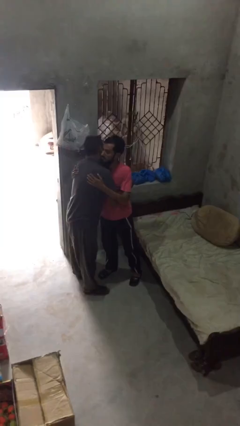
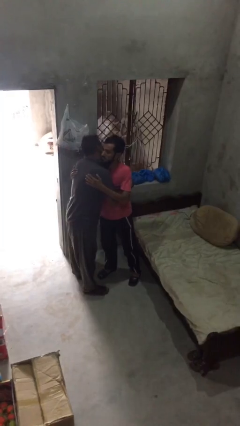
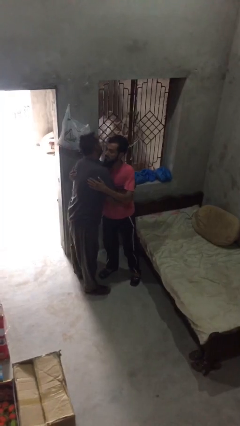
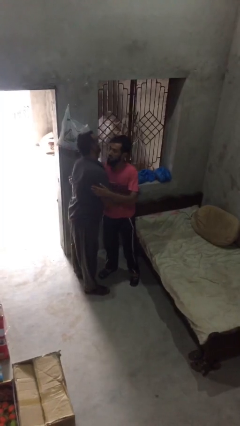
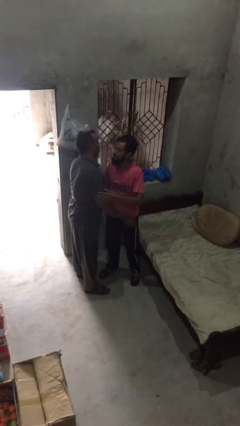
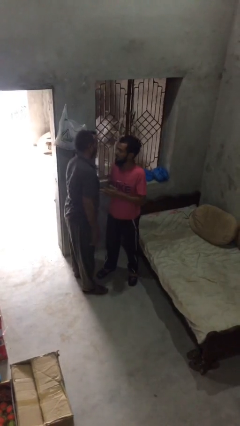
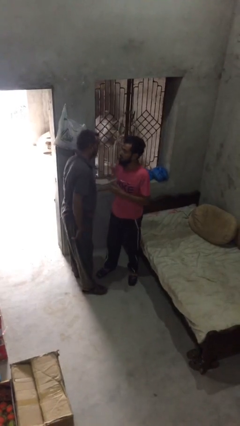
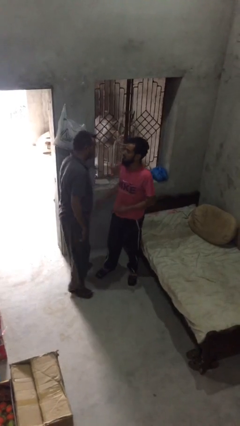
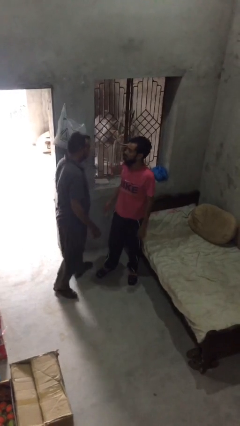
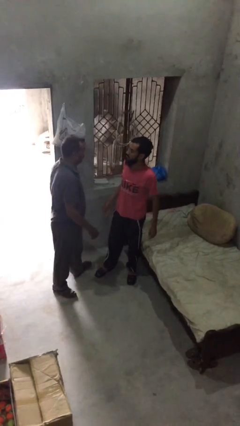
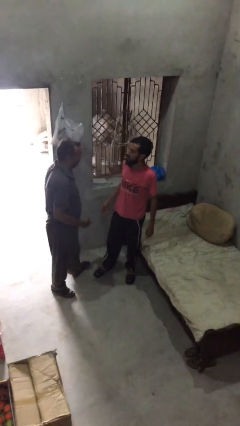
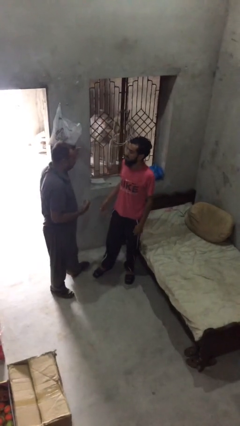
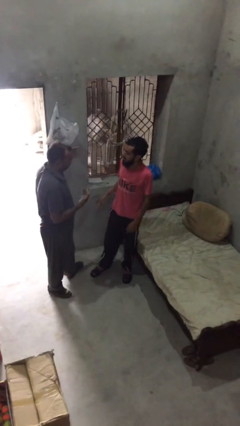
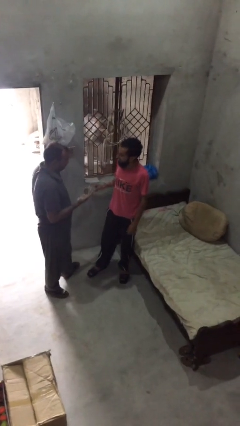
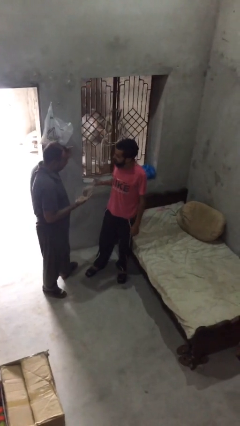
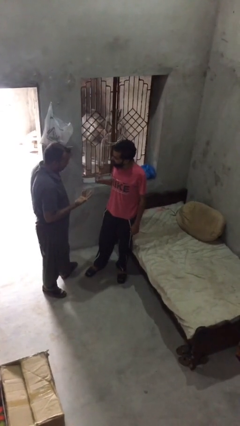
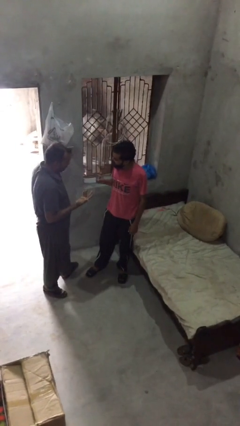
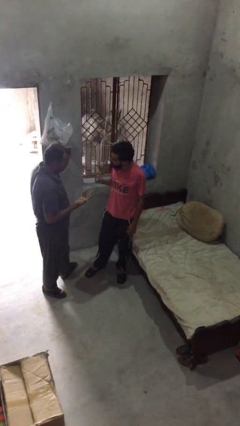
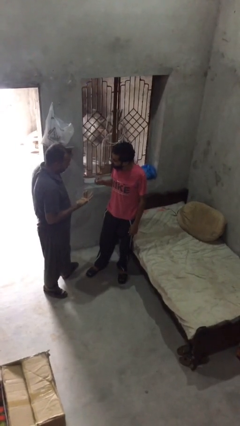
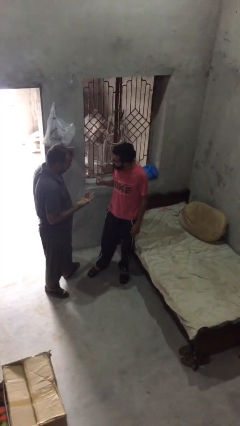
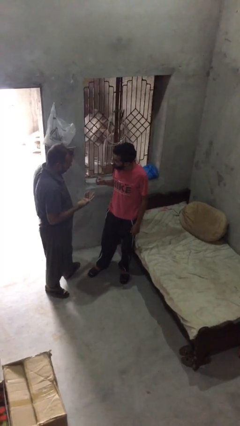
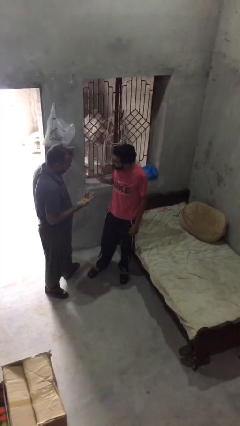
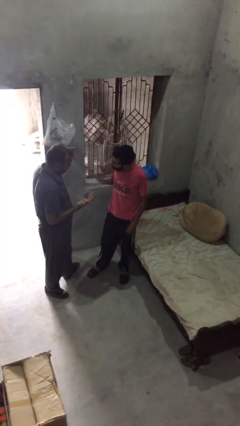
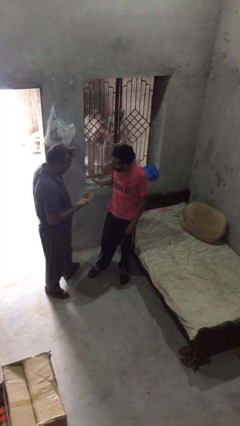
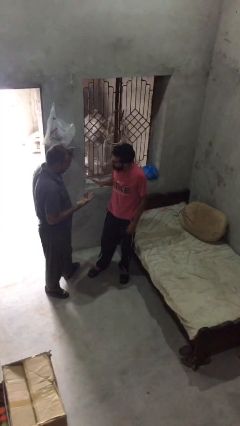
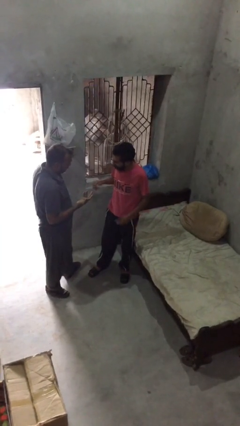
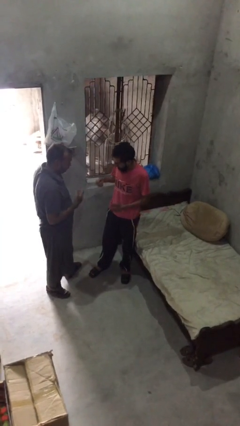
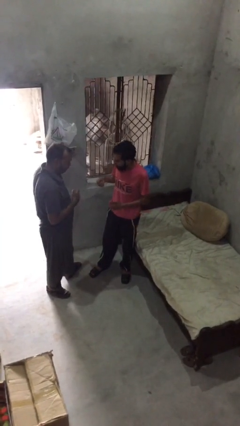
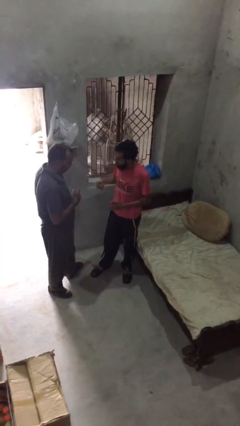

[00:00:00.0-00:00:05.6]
person talks to person

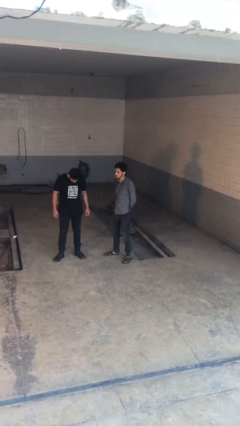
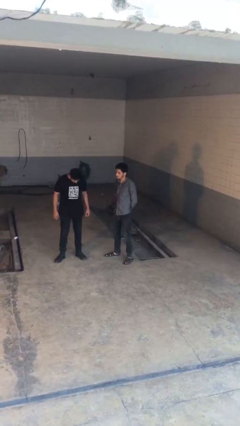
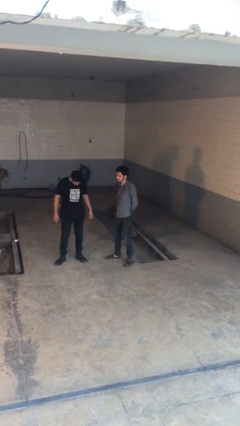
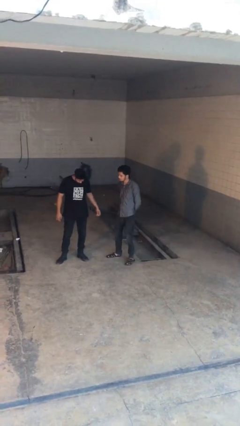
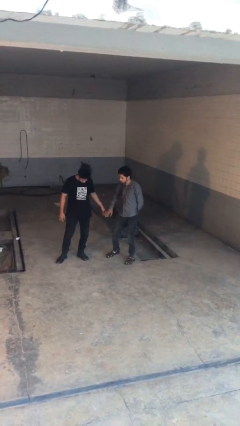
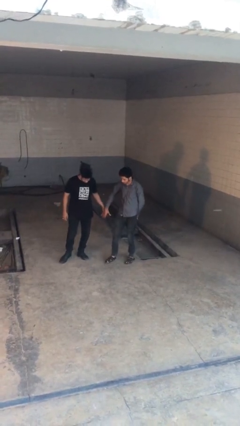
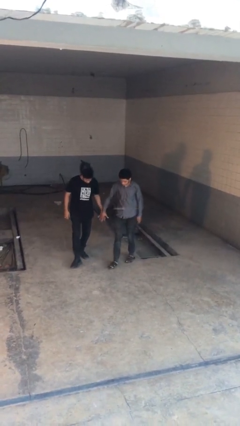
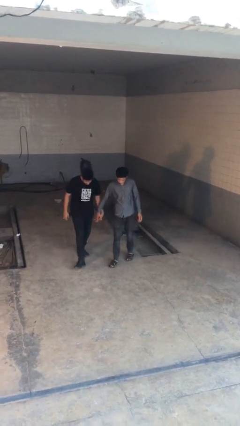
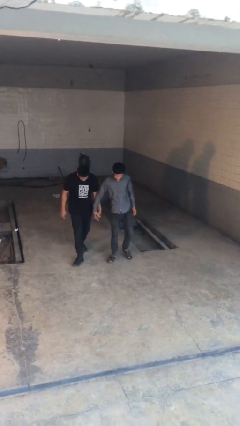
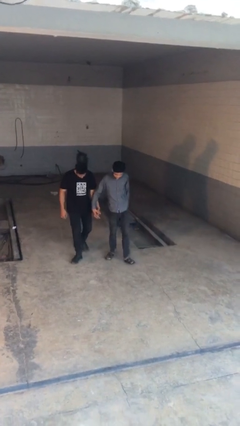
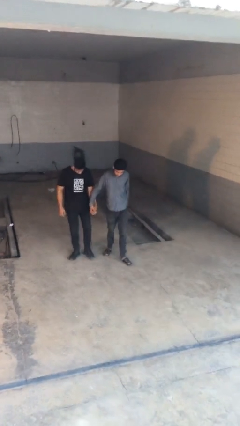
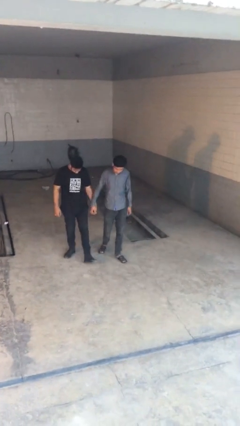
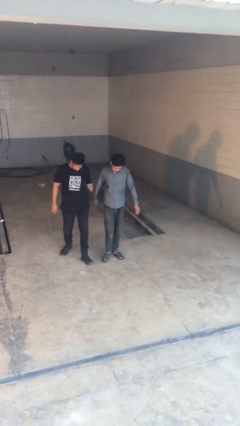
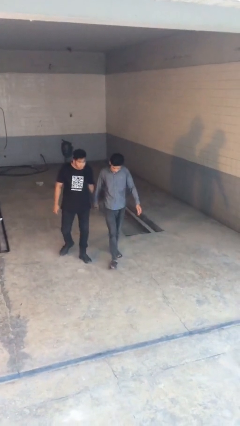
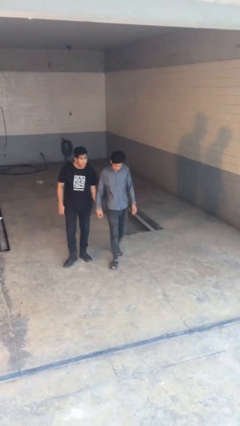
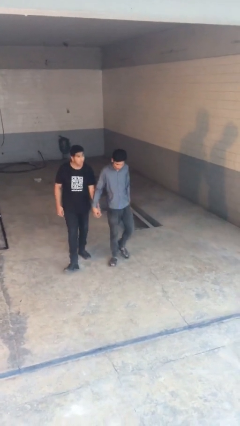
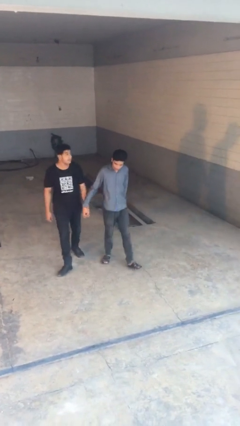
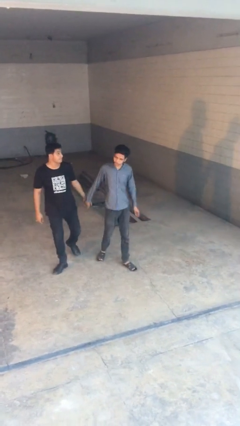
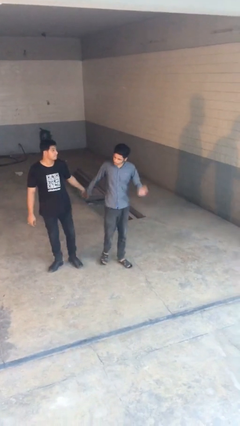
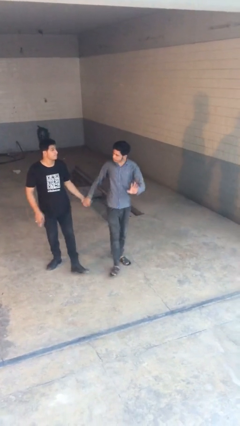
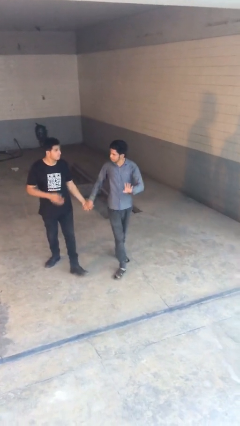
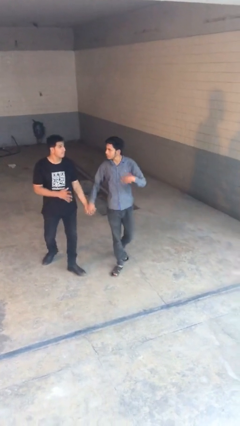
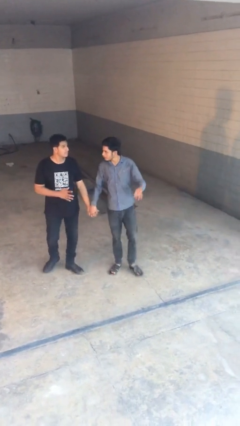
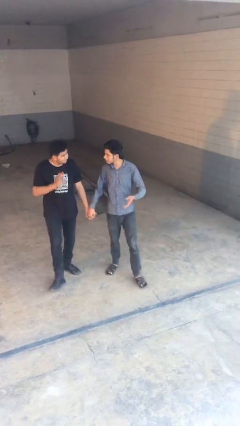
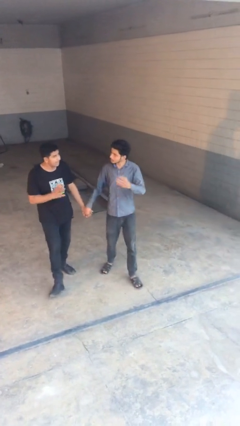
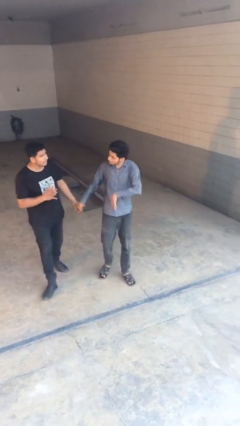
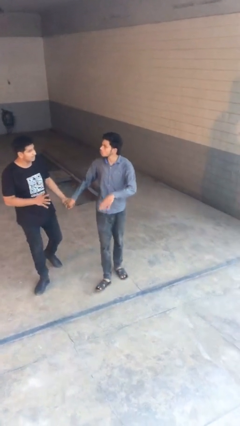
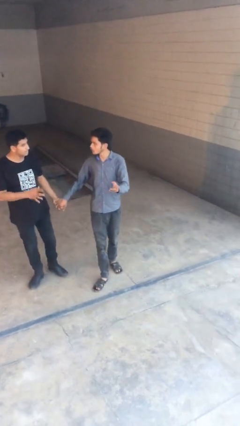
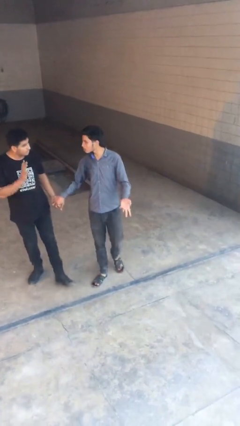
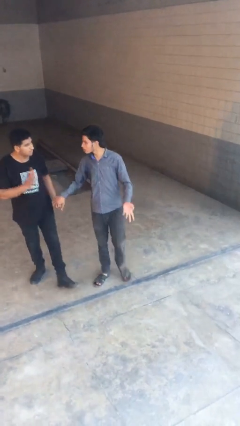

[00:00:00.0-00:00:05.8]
person holds hand

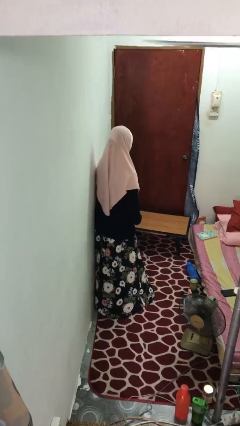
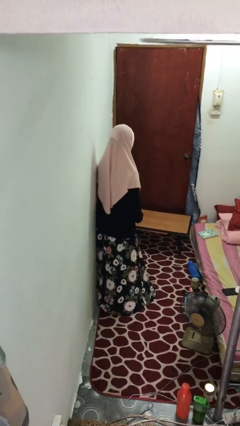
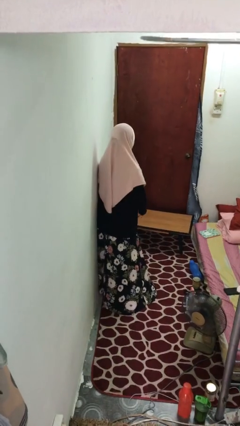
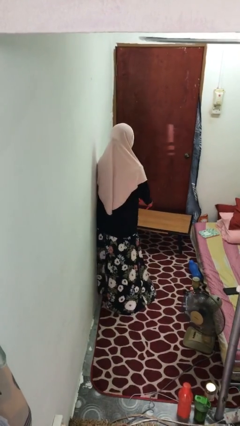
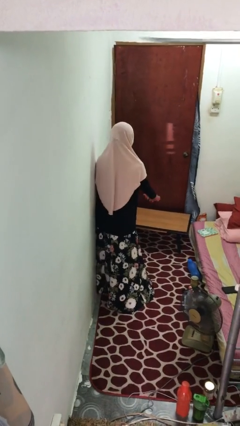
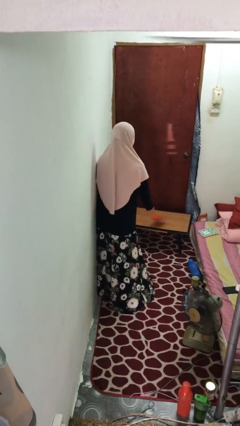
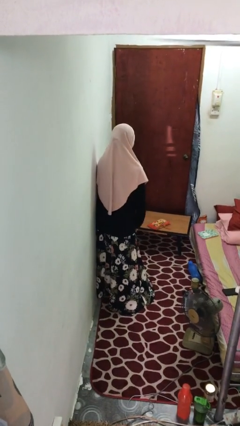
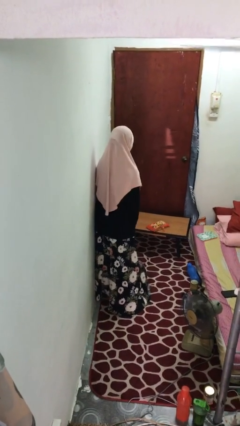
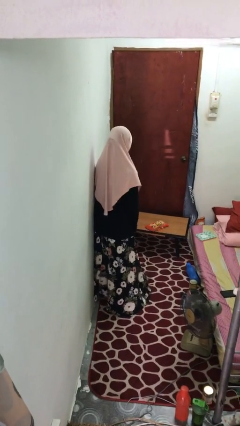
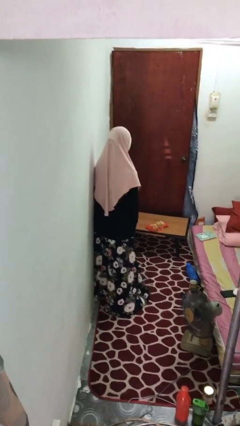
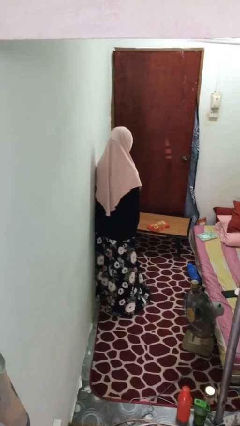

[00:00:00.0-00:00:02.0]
person throws object on table

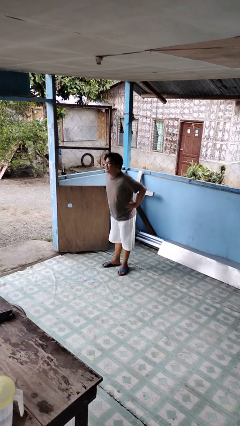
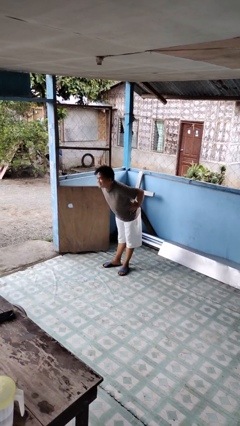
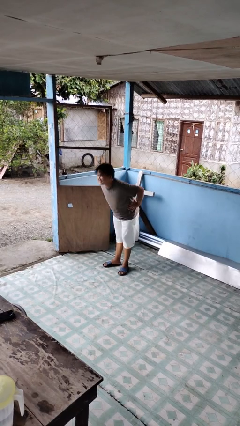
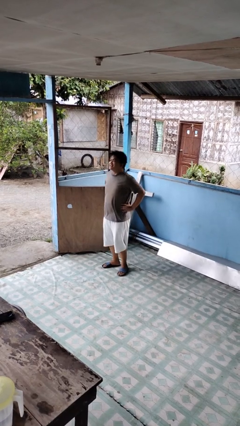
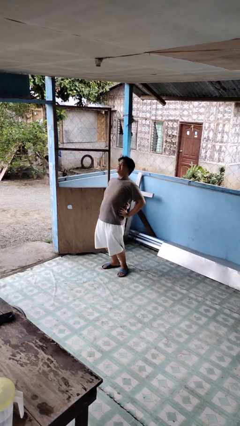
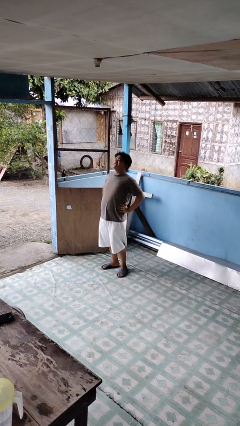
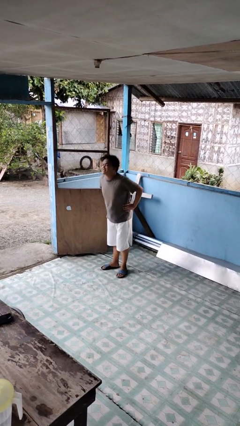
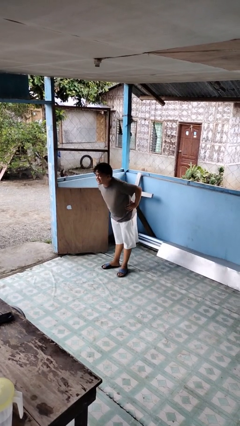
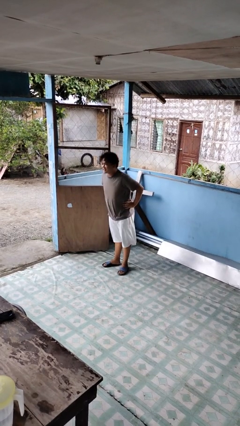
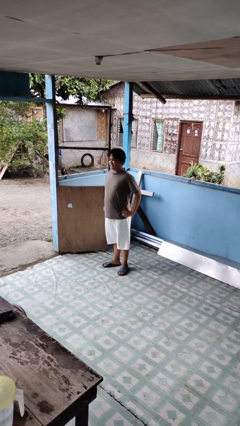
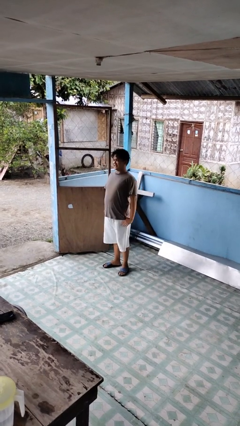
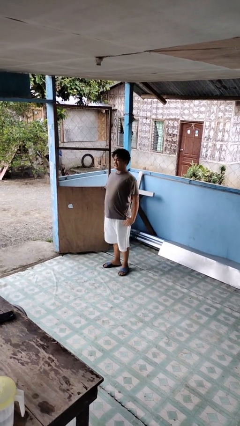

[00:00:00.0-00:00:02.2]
person wiggles hips

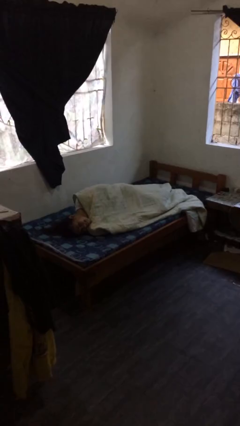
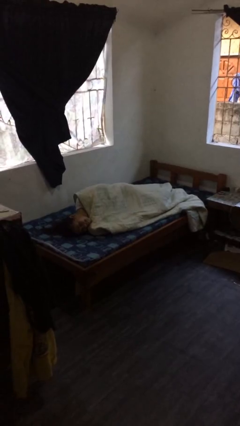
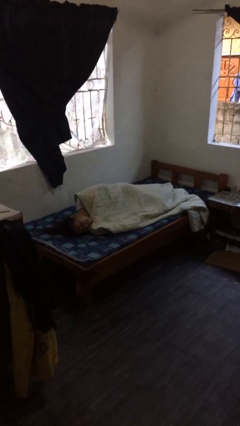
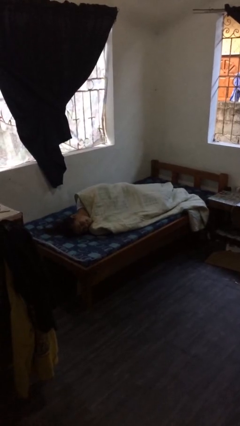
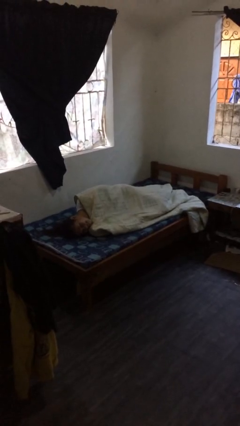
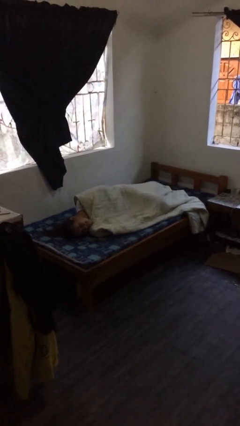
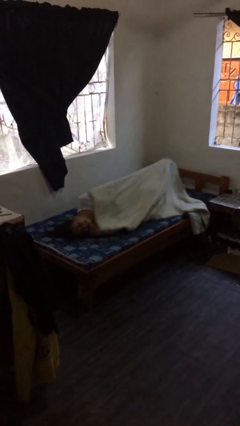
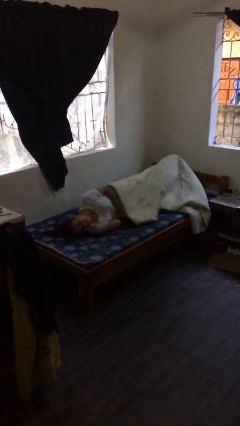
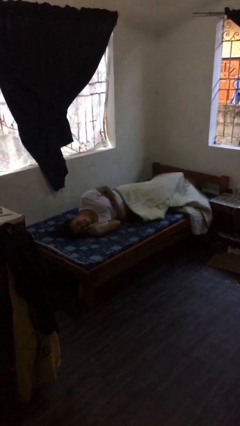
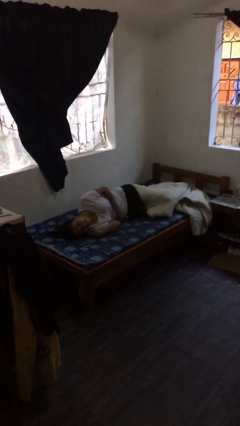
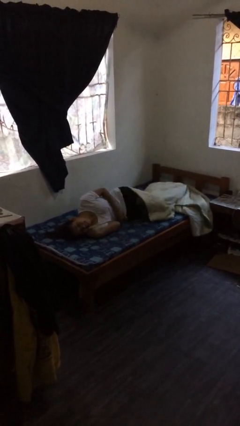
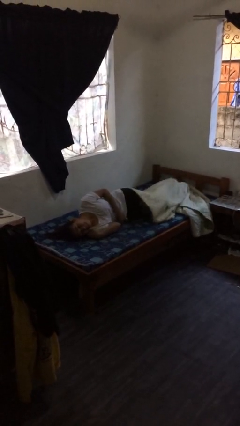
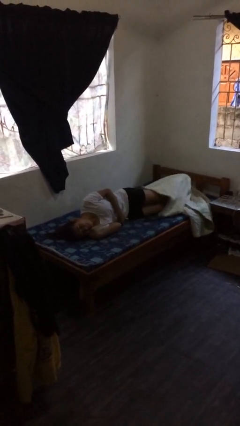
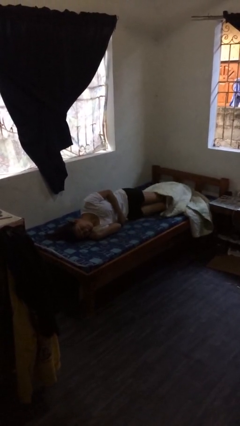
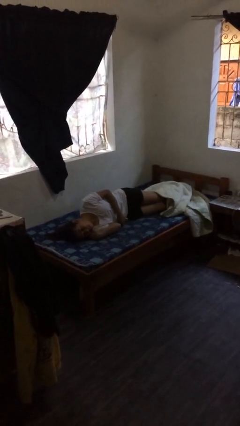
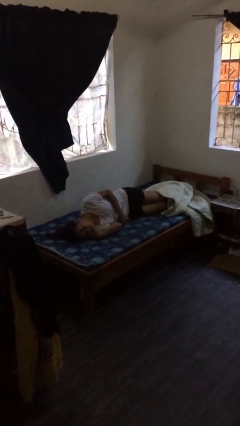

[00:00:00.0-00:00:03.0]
person uncovers with bedsheets
